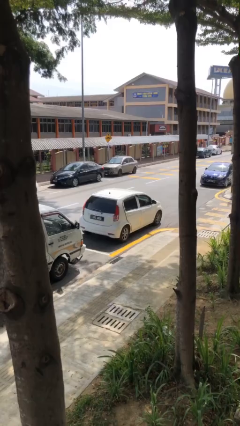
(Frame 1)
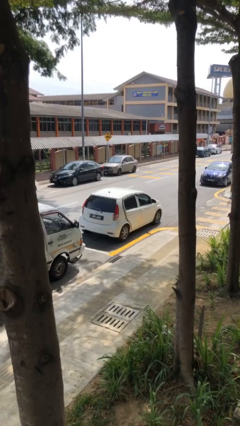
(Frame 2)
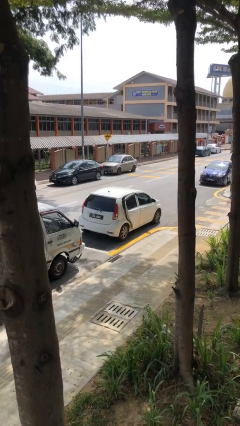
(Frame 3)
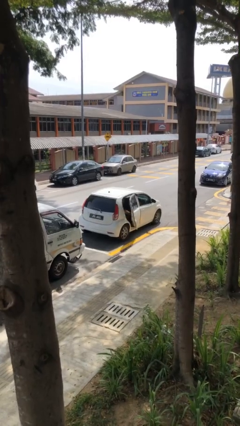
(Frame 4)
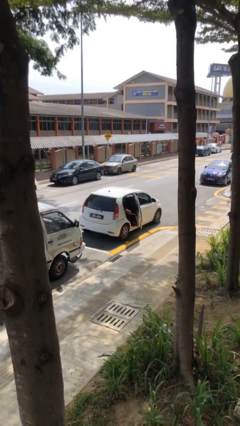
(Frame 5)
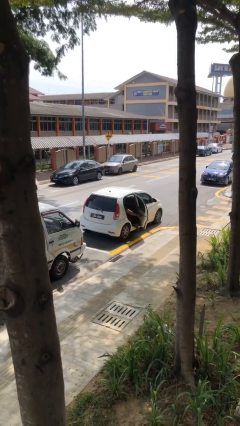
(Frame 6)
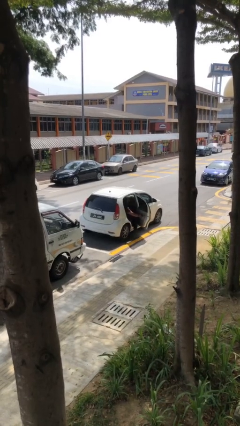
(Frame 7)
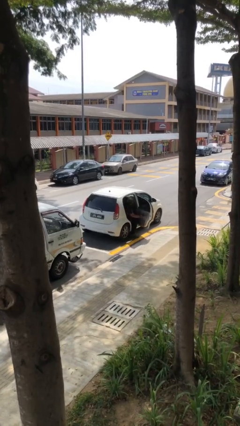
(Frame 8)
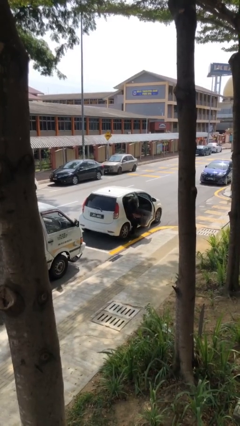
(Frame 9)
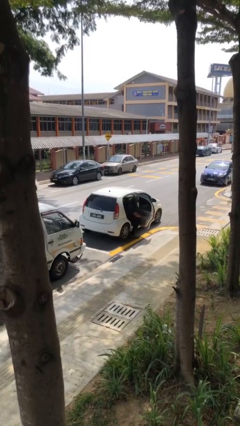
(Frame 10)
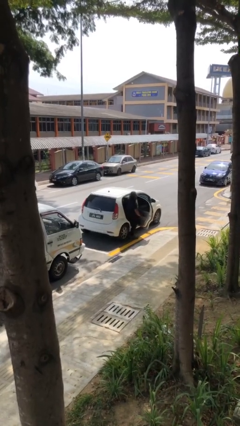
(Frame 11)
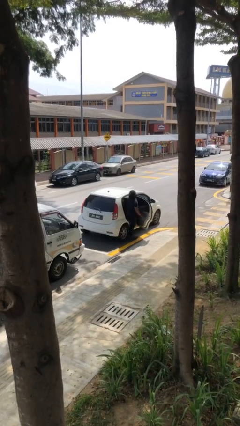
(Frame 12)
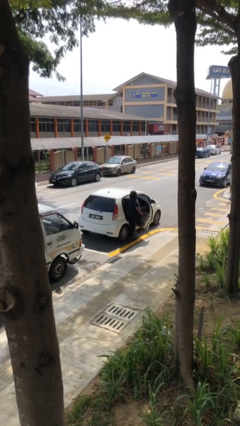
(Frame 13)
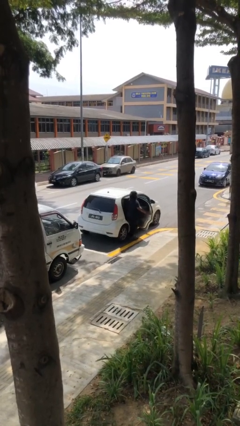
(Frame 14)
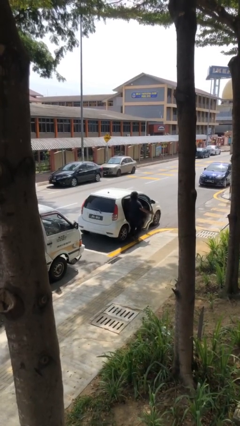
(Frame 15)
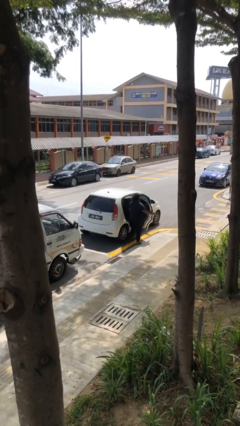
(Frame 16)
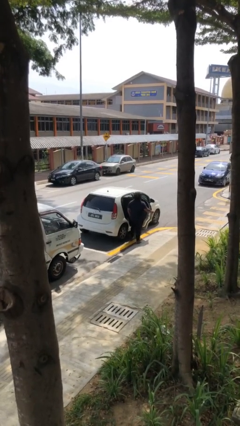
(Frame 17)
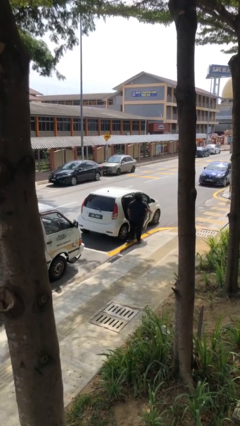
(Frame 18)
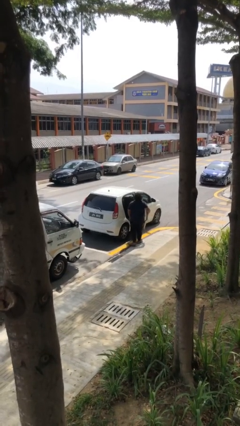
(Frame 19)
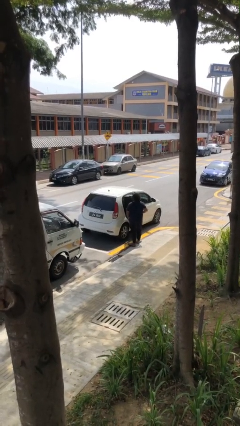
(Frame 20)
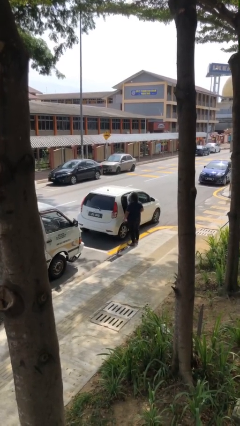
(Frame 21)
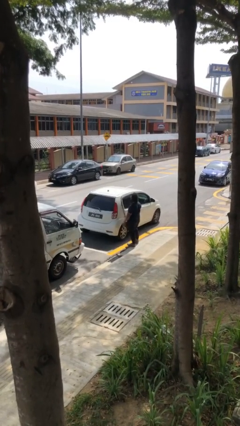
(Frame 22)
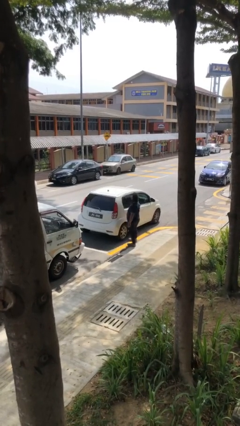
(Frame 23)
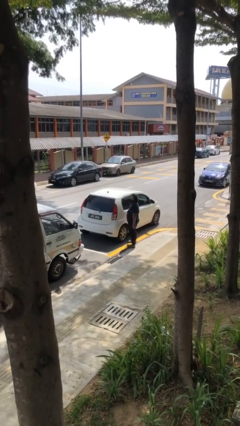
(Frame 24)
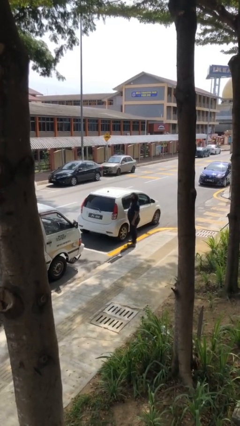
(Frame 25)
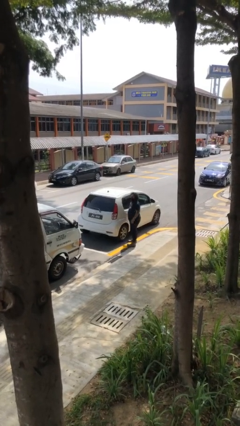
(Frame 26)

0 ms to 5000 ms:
car drops off person

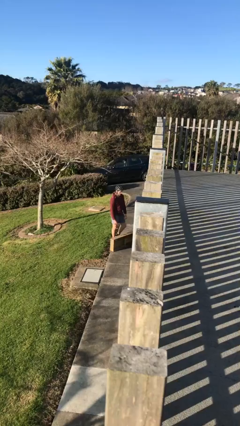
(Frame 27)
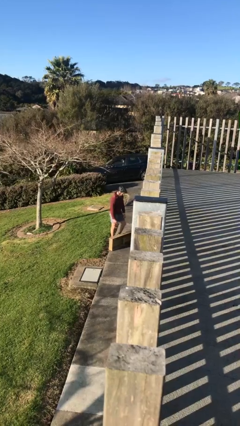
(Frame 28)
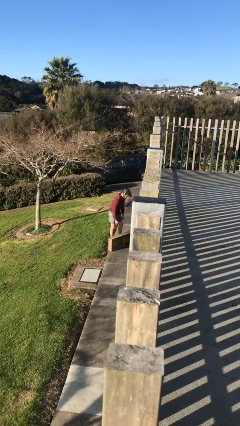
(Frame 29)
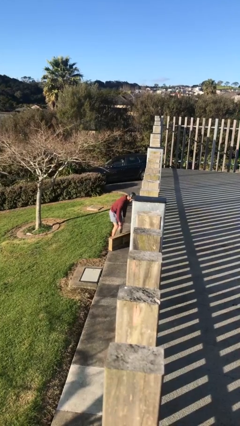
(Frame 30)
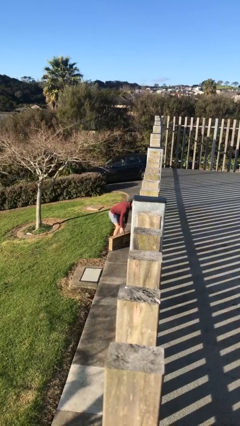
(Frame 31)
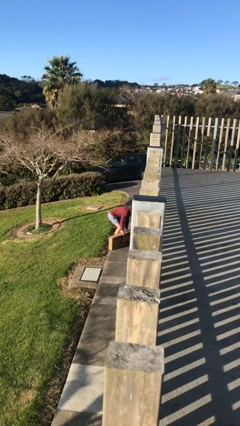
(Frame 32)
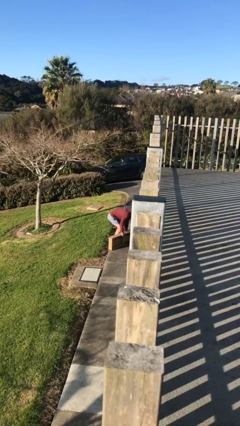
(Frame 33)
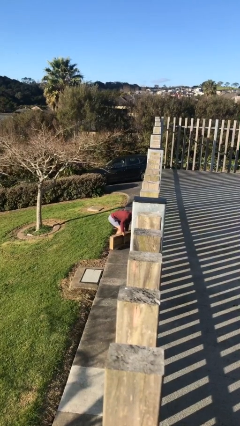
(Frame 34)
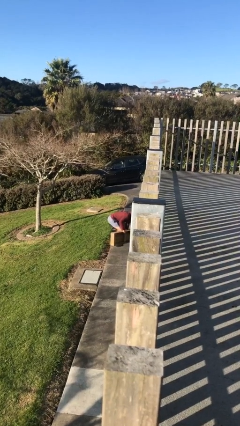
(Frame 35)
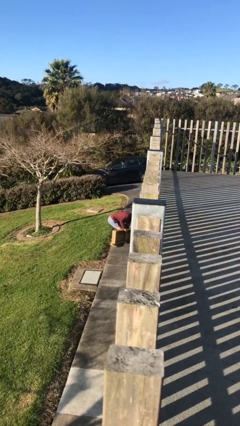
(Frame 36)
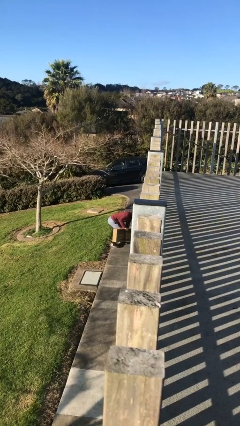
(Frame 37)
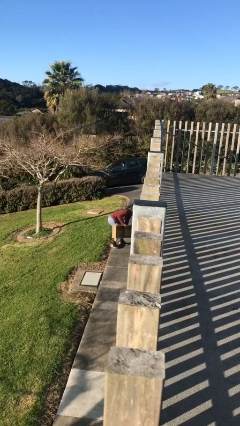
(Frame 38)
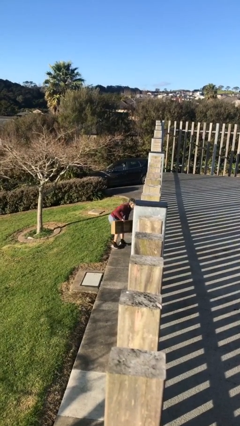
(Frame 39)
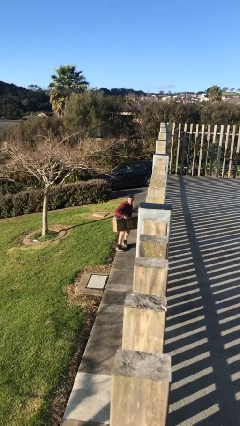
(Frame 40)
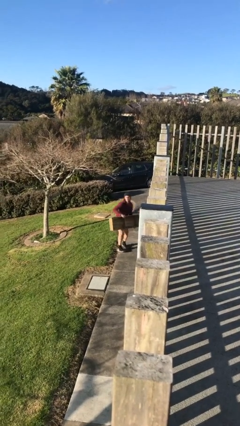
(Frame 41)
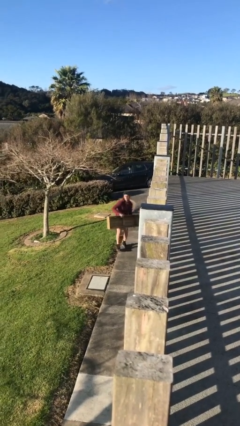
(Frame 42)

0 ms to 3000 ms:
person picks up object from floor

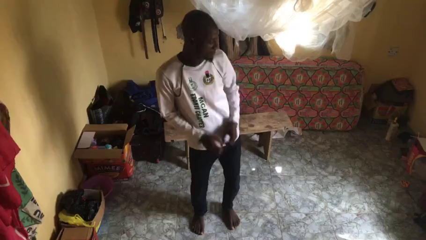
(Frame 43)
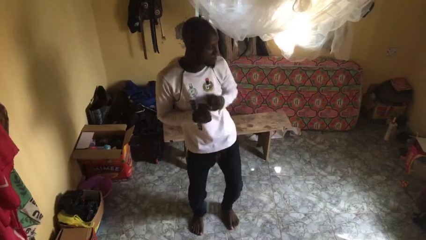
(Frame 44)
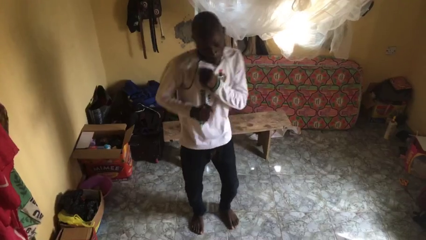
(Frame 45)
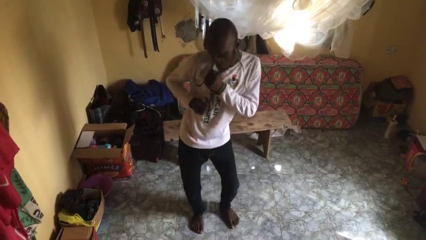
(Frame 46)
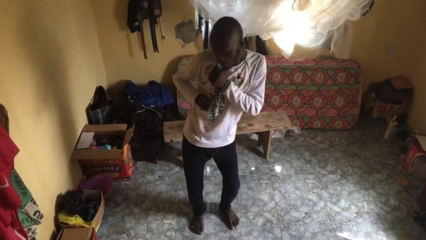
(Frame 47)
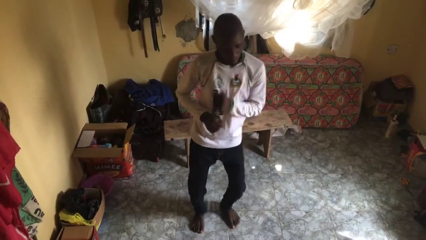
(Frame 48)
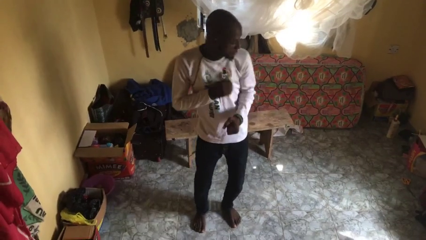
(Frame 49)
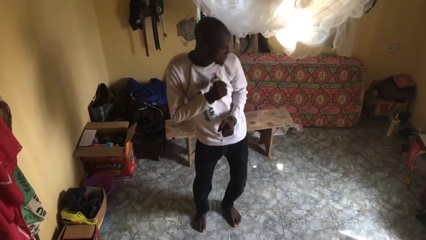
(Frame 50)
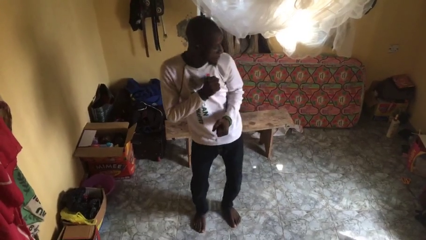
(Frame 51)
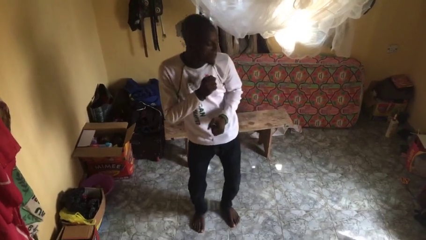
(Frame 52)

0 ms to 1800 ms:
person dances in place

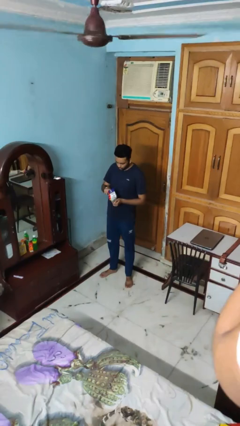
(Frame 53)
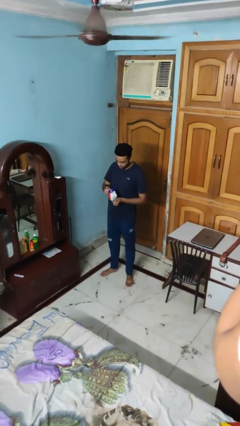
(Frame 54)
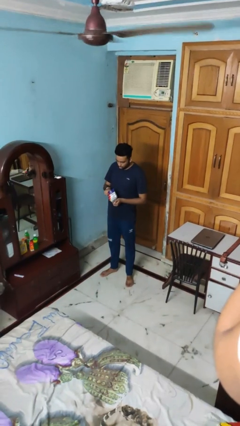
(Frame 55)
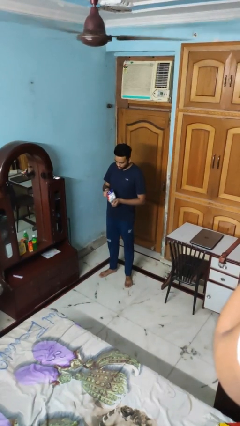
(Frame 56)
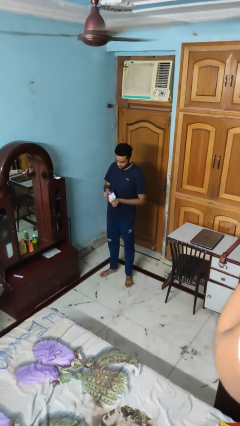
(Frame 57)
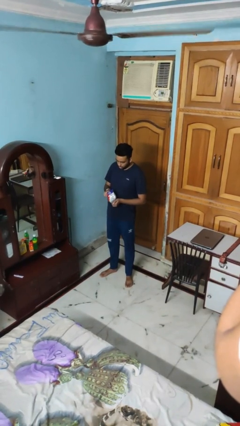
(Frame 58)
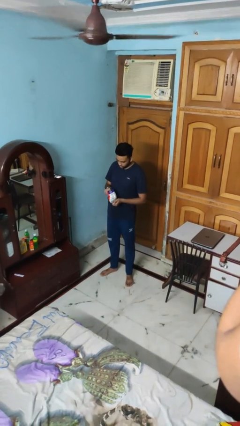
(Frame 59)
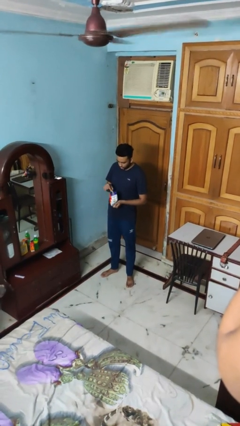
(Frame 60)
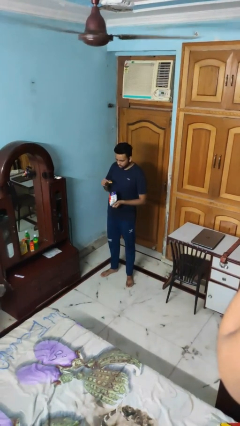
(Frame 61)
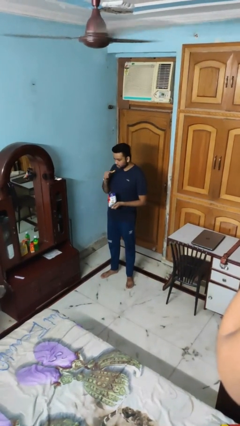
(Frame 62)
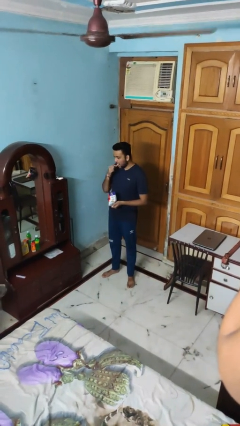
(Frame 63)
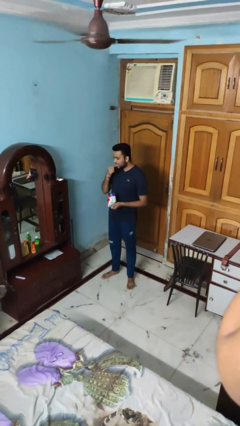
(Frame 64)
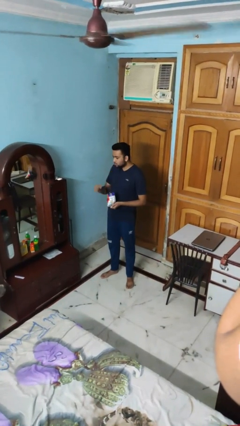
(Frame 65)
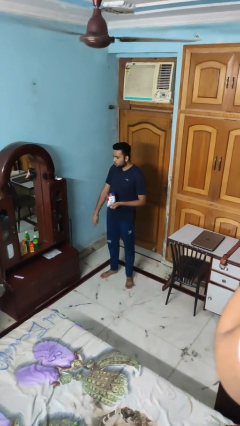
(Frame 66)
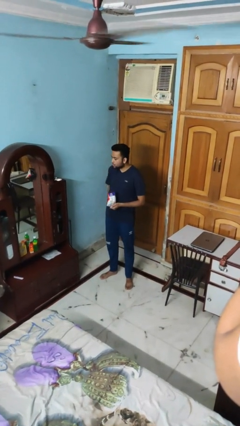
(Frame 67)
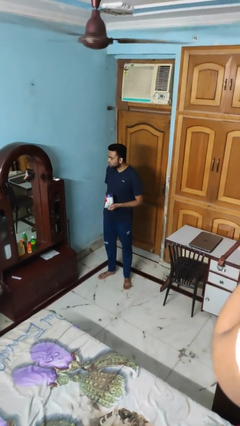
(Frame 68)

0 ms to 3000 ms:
person eats snack from bag

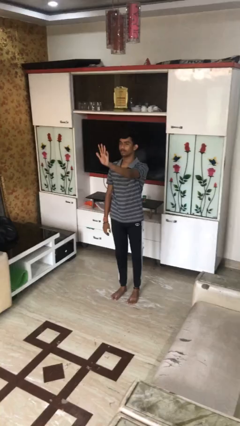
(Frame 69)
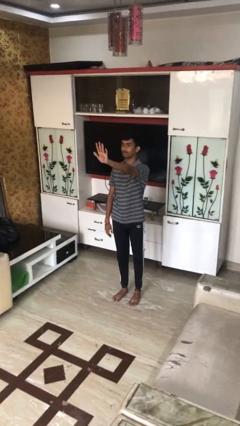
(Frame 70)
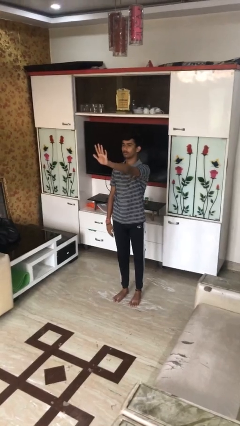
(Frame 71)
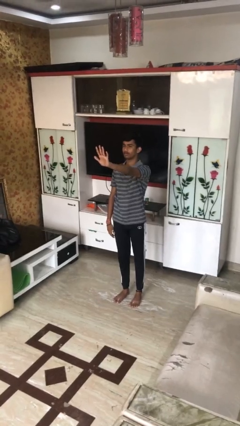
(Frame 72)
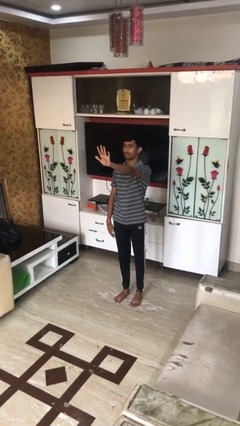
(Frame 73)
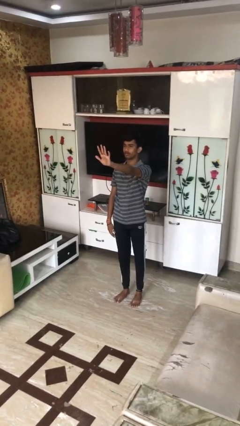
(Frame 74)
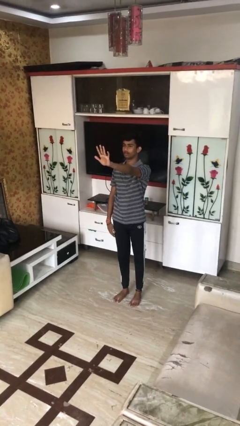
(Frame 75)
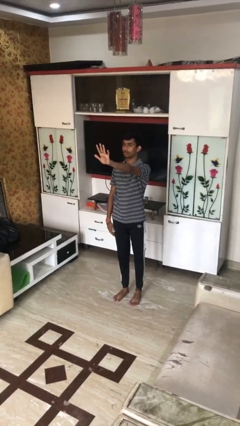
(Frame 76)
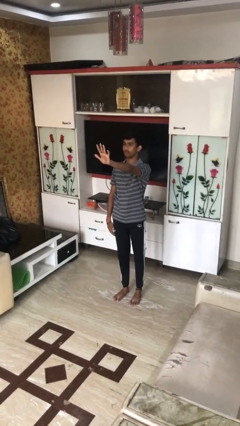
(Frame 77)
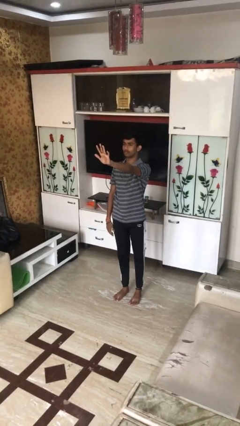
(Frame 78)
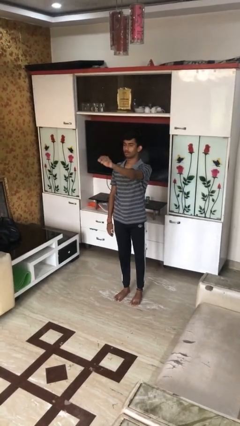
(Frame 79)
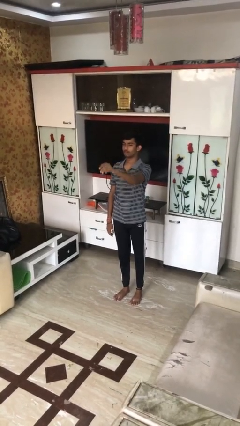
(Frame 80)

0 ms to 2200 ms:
person gestures number five

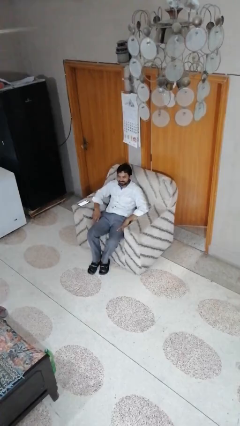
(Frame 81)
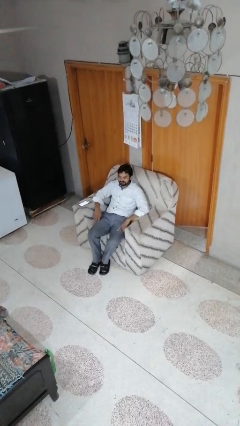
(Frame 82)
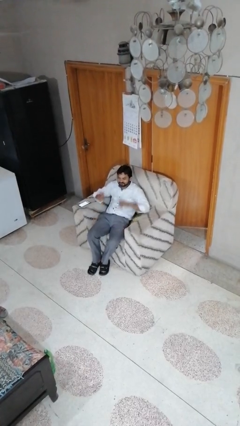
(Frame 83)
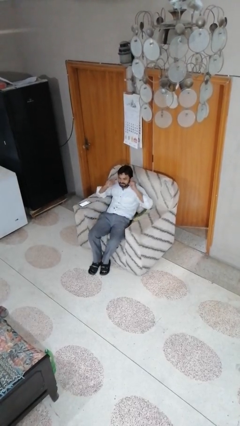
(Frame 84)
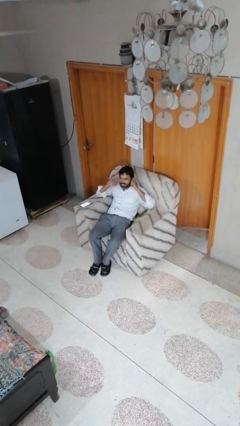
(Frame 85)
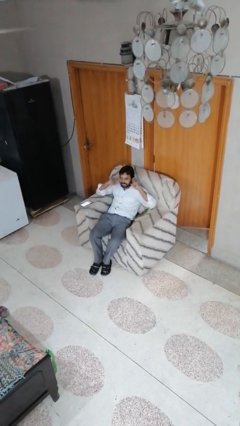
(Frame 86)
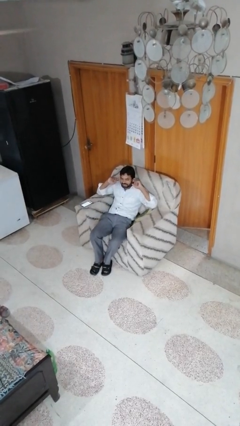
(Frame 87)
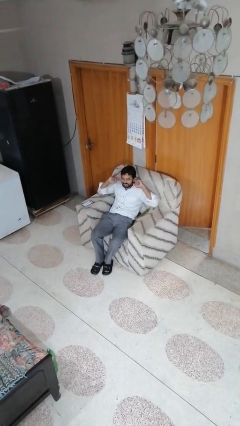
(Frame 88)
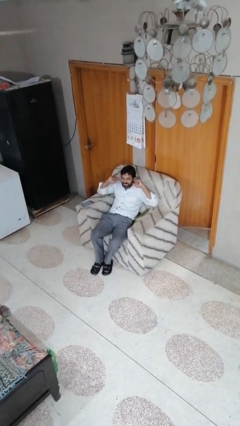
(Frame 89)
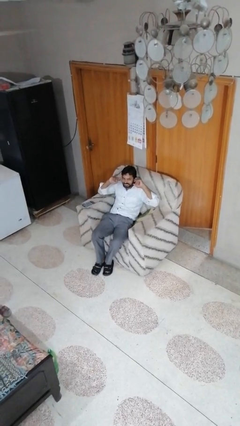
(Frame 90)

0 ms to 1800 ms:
person puts fingers in ear

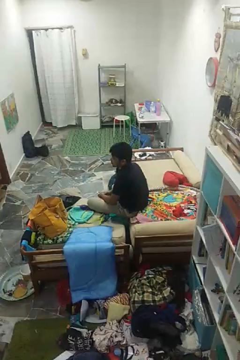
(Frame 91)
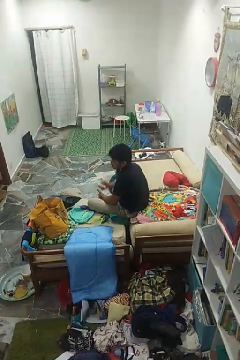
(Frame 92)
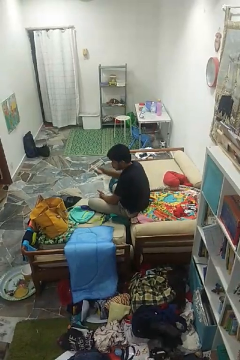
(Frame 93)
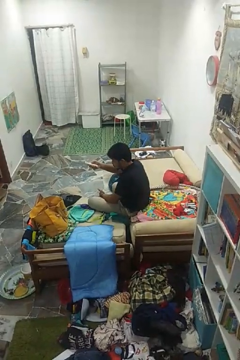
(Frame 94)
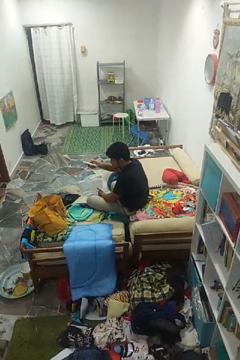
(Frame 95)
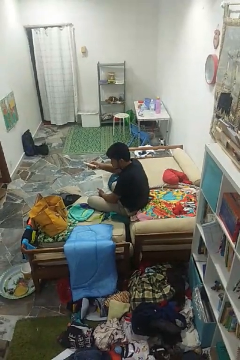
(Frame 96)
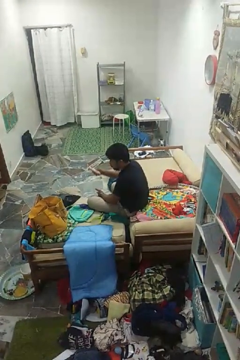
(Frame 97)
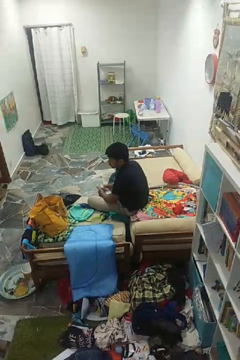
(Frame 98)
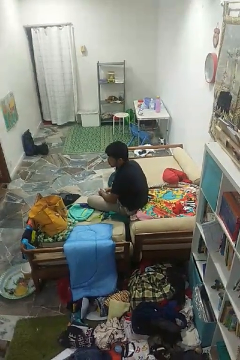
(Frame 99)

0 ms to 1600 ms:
person uses television remote
